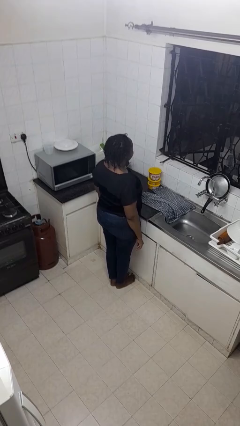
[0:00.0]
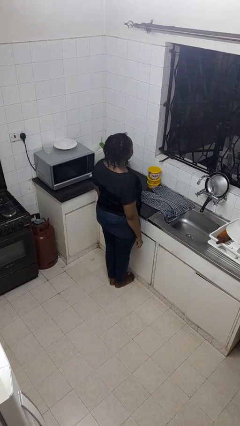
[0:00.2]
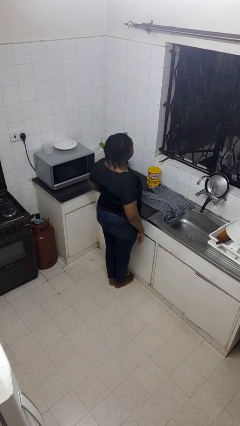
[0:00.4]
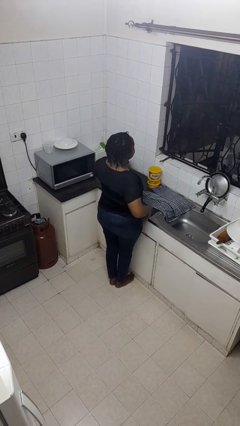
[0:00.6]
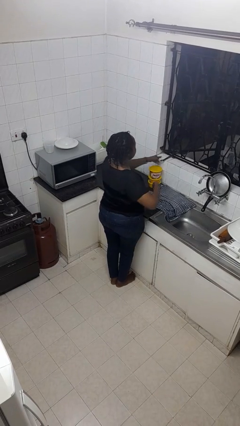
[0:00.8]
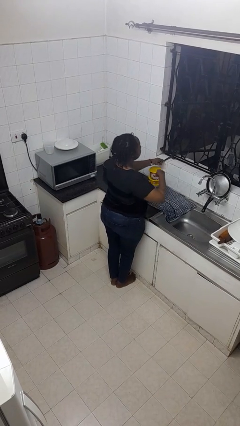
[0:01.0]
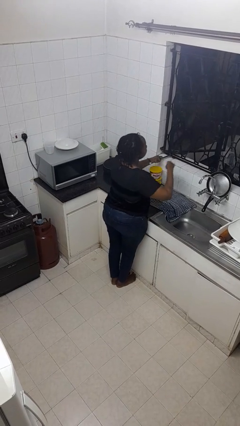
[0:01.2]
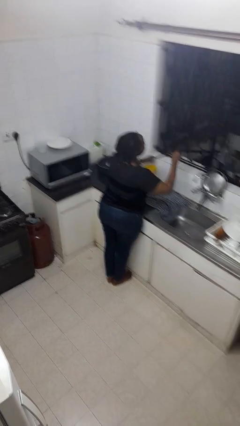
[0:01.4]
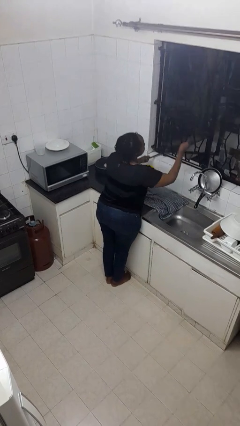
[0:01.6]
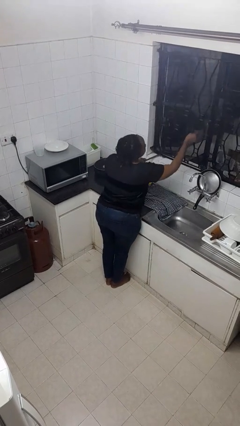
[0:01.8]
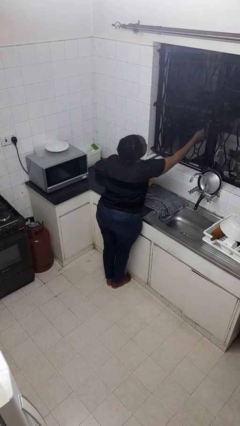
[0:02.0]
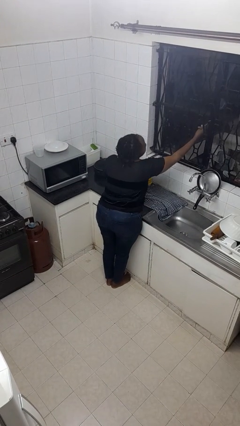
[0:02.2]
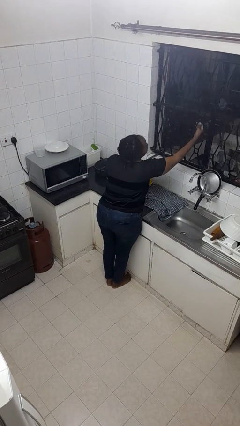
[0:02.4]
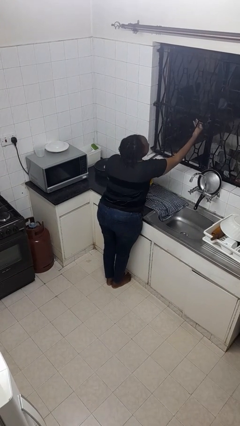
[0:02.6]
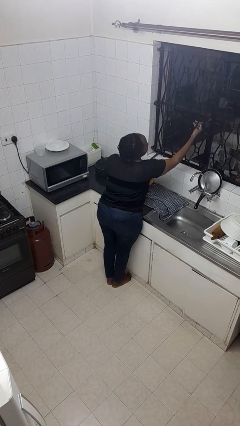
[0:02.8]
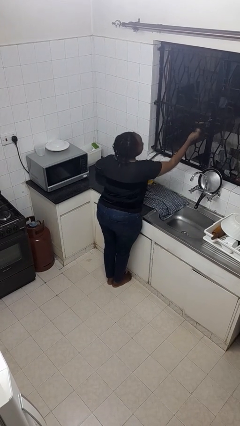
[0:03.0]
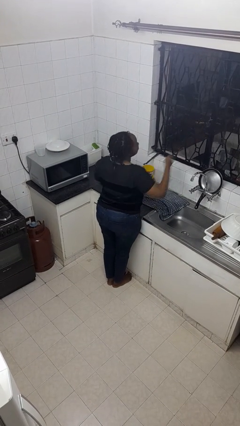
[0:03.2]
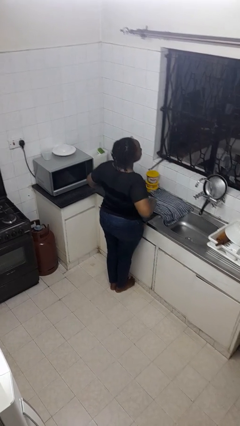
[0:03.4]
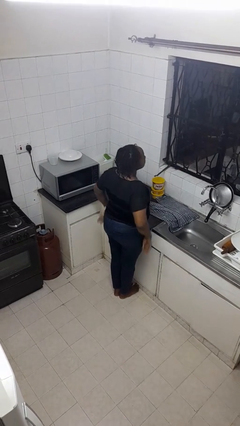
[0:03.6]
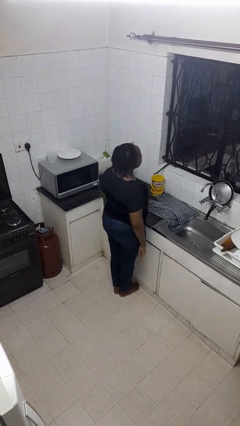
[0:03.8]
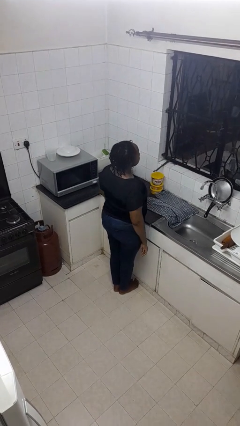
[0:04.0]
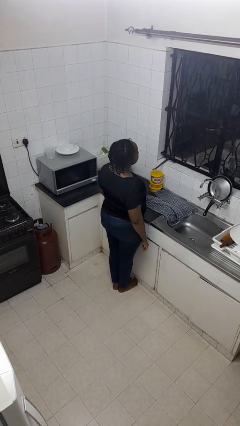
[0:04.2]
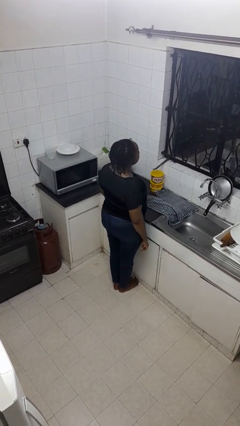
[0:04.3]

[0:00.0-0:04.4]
person closes home window

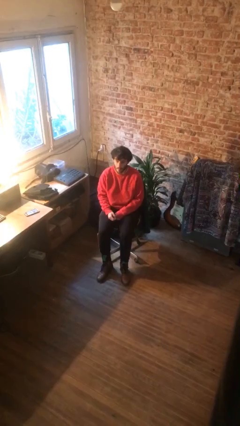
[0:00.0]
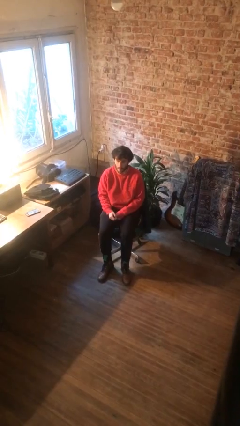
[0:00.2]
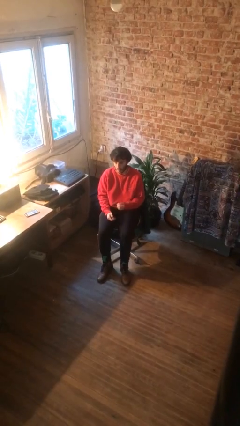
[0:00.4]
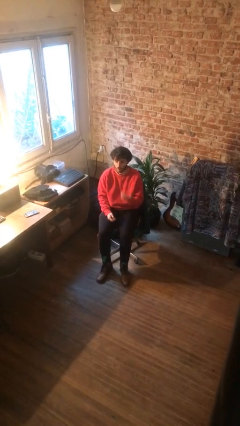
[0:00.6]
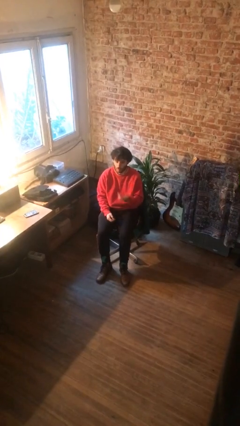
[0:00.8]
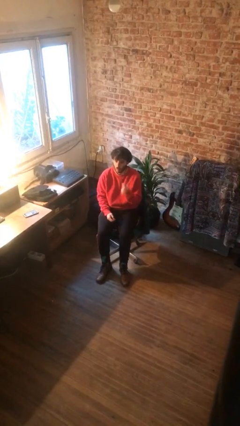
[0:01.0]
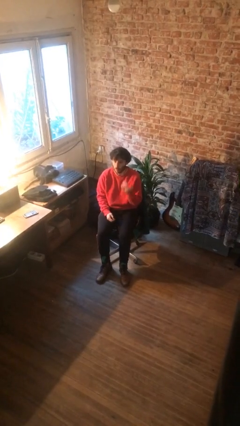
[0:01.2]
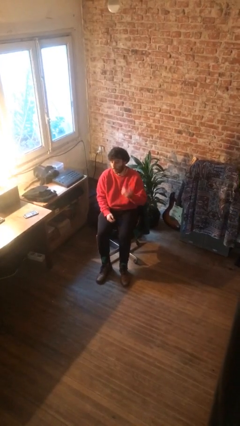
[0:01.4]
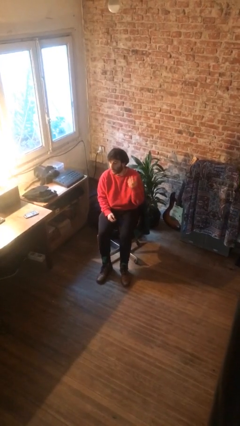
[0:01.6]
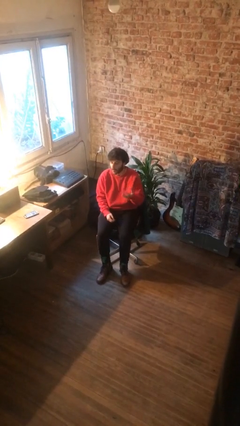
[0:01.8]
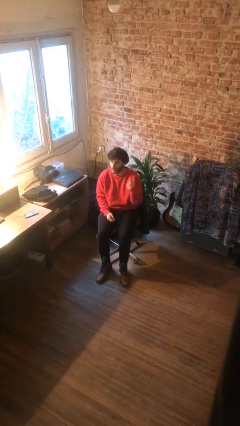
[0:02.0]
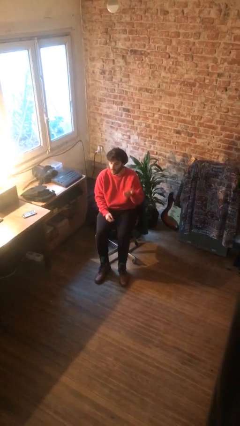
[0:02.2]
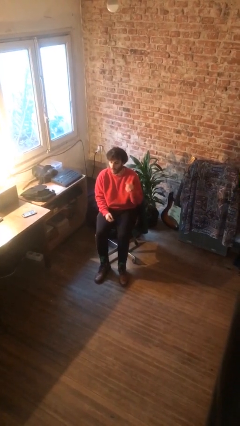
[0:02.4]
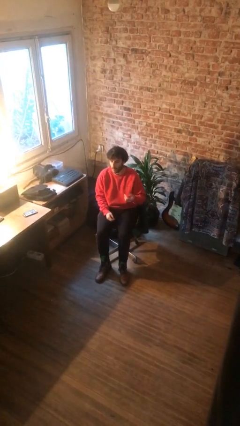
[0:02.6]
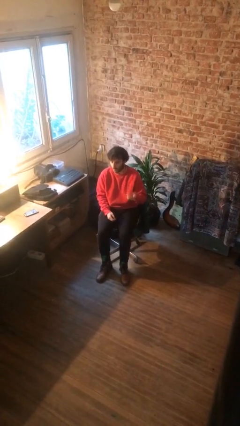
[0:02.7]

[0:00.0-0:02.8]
person gestures come here

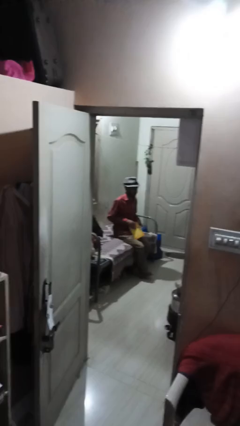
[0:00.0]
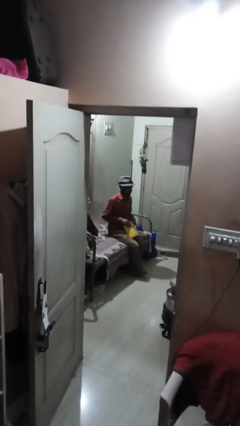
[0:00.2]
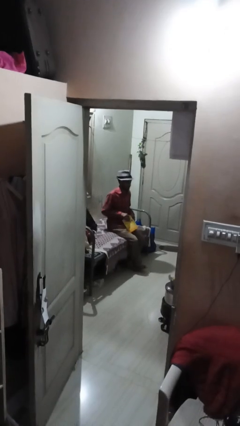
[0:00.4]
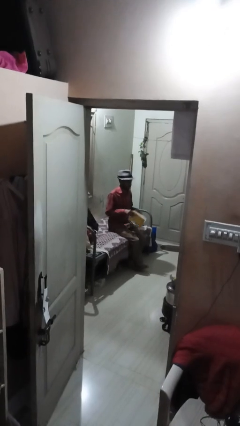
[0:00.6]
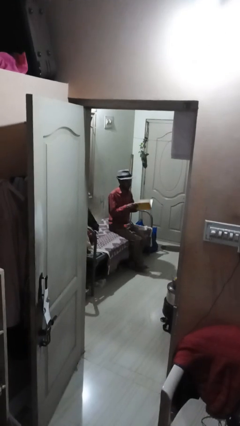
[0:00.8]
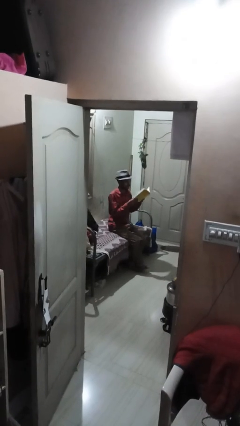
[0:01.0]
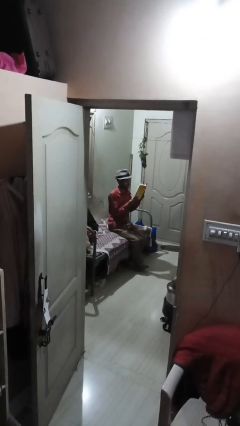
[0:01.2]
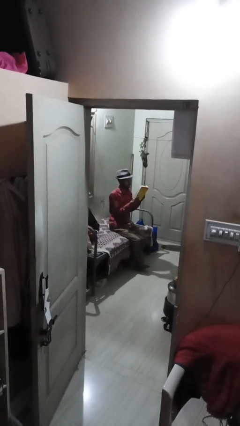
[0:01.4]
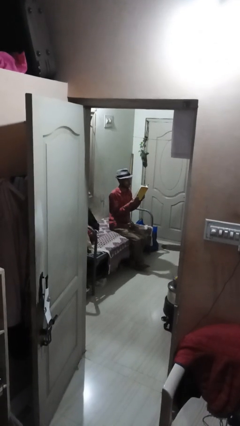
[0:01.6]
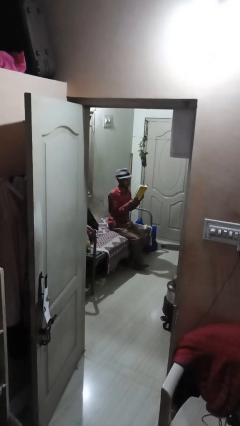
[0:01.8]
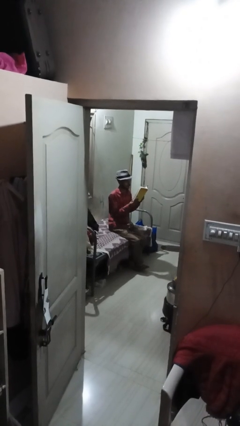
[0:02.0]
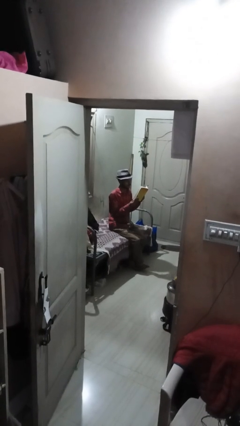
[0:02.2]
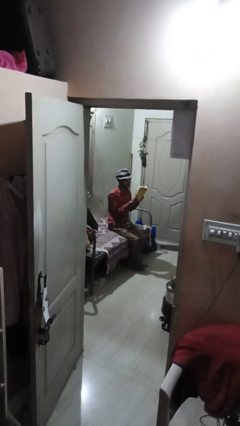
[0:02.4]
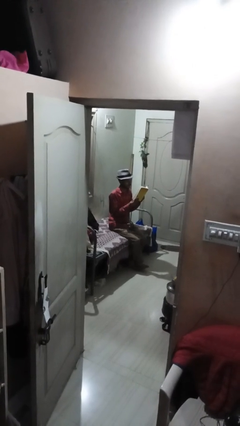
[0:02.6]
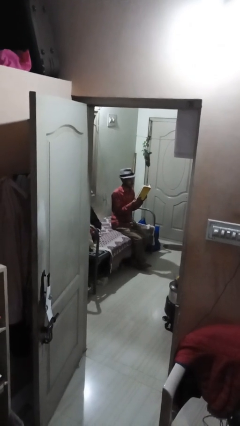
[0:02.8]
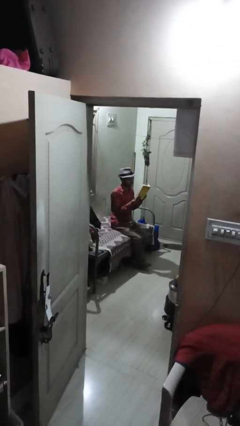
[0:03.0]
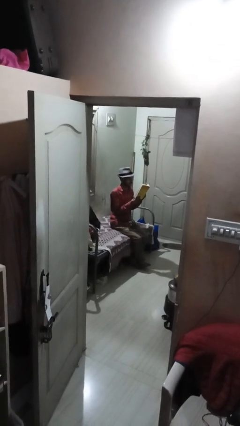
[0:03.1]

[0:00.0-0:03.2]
person reads book

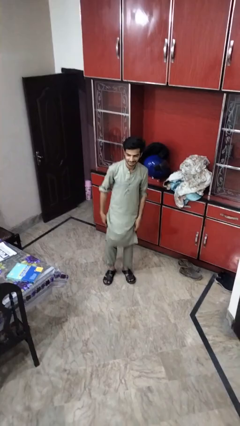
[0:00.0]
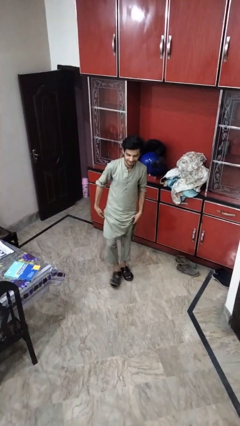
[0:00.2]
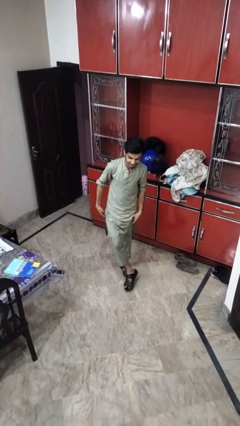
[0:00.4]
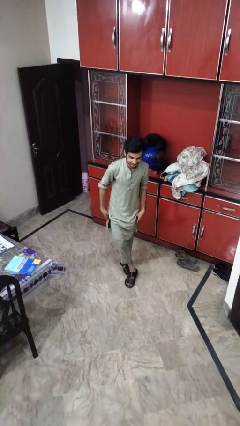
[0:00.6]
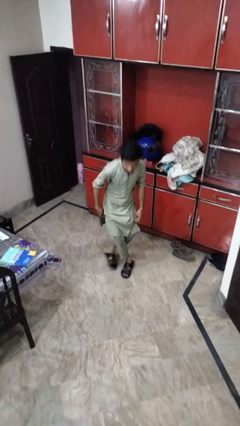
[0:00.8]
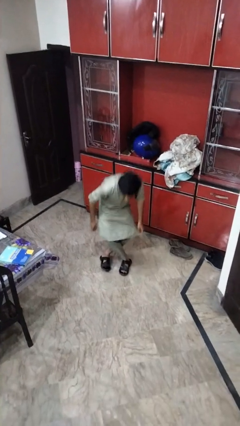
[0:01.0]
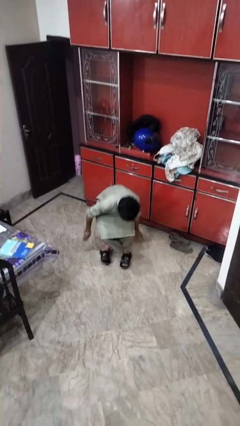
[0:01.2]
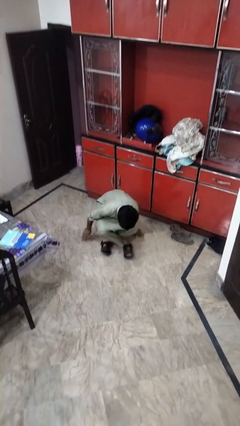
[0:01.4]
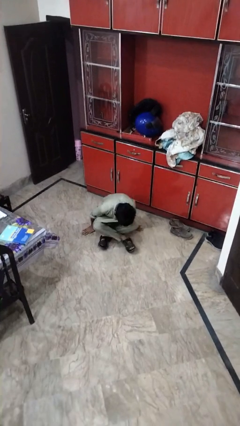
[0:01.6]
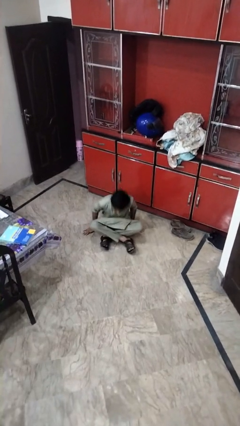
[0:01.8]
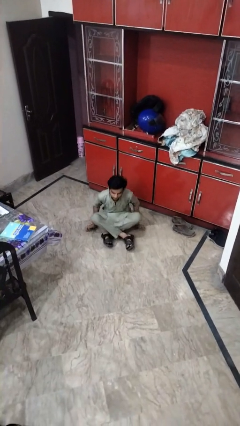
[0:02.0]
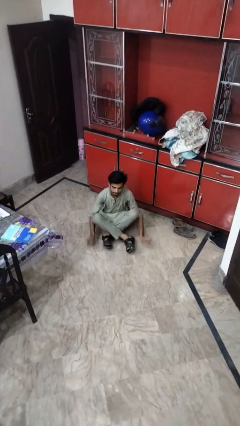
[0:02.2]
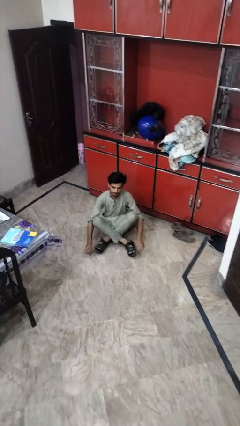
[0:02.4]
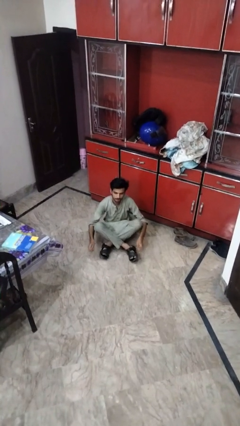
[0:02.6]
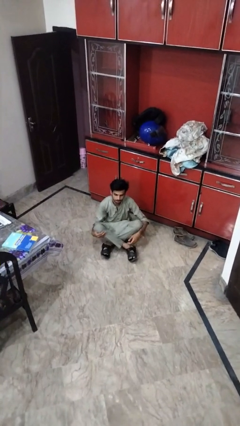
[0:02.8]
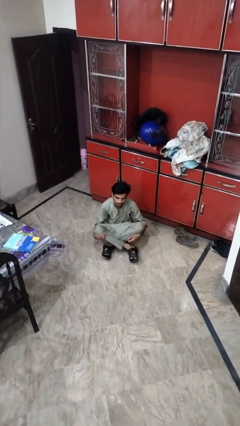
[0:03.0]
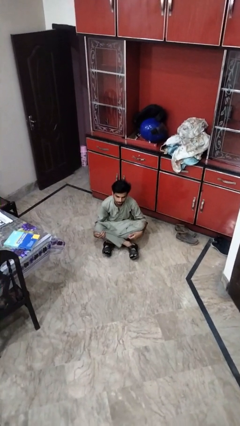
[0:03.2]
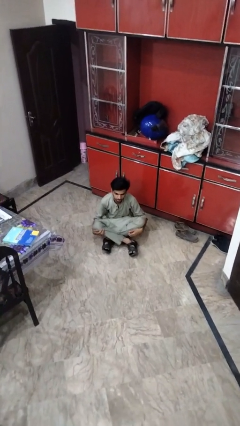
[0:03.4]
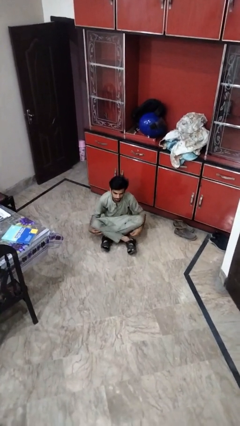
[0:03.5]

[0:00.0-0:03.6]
person sits crisscross

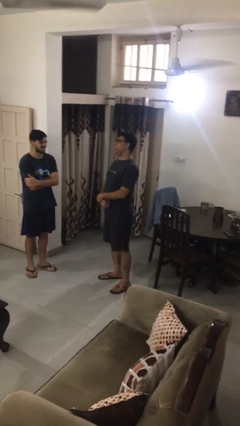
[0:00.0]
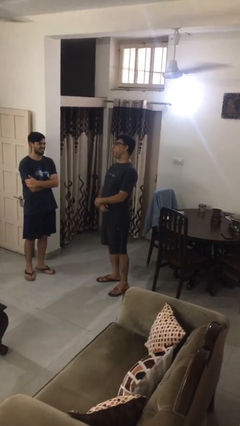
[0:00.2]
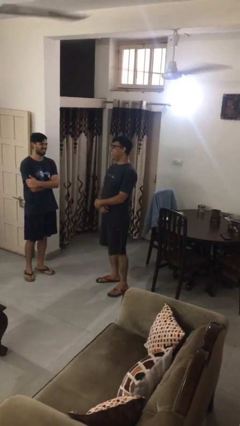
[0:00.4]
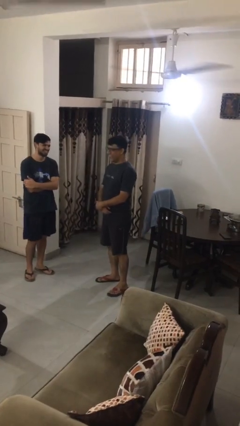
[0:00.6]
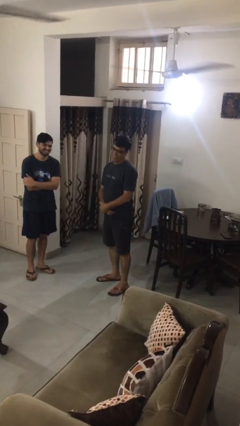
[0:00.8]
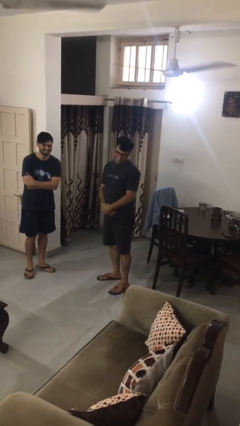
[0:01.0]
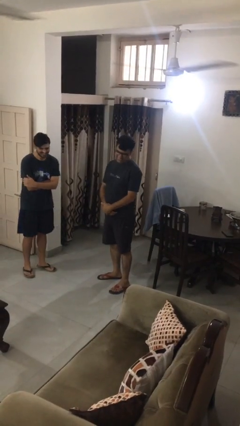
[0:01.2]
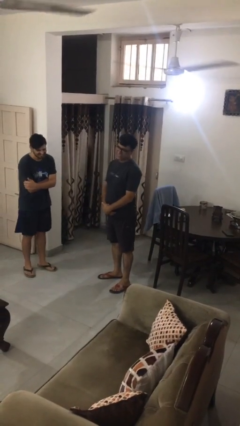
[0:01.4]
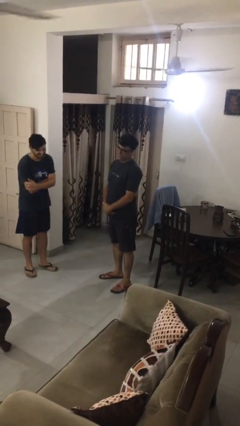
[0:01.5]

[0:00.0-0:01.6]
person laughs with person

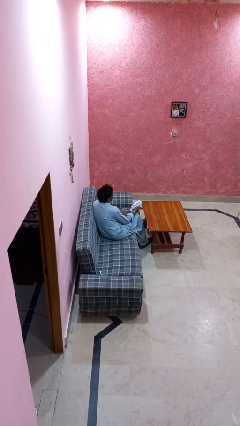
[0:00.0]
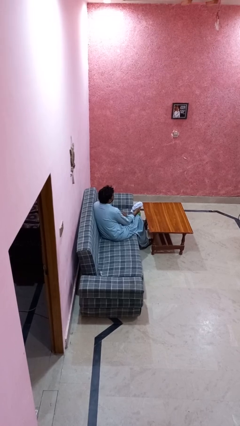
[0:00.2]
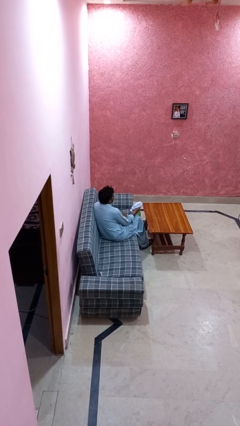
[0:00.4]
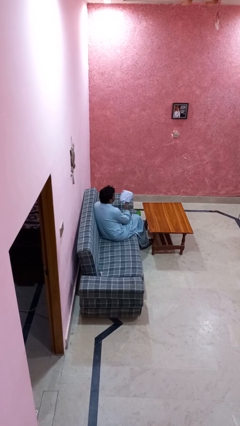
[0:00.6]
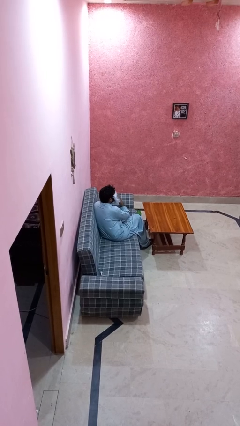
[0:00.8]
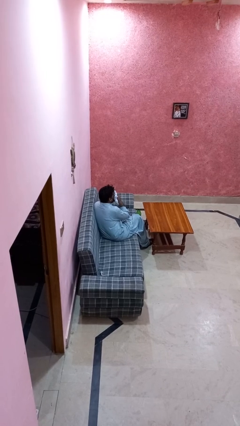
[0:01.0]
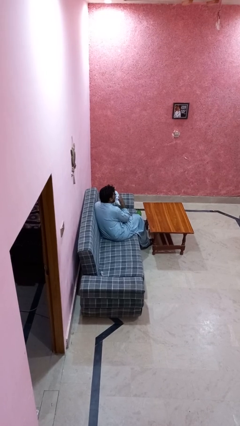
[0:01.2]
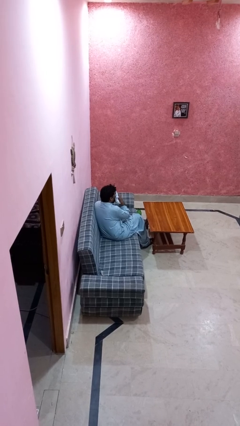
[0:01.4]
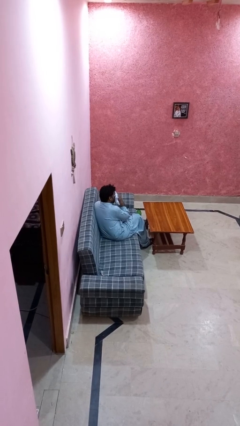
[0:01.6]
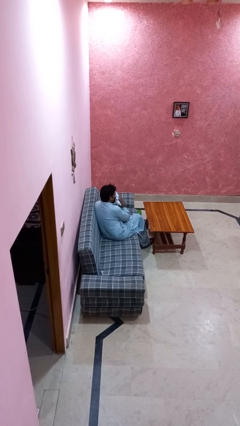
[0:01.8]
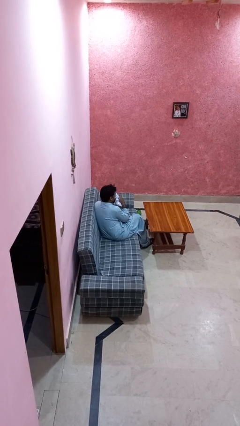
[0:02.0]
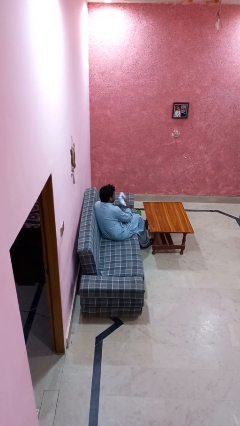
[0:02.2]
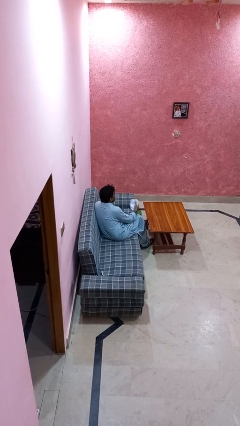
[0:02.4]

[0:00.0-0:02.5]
person blows nose
